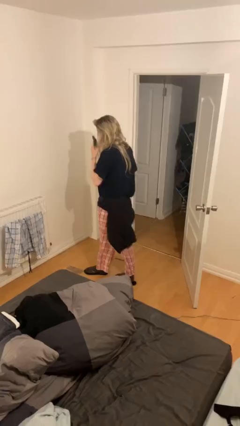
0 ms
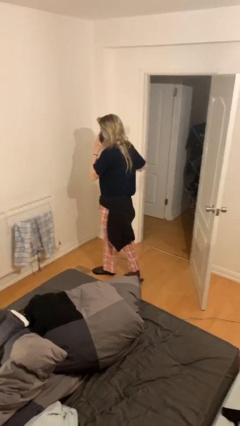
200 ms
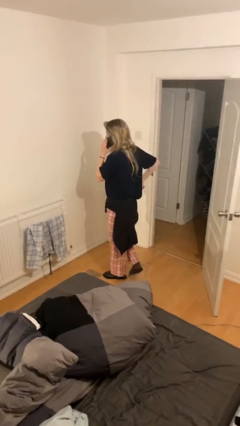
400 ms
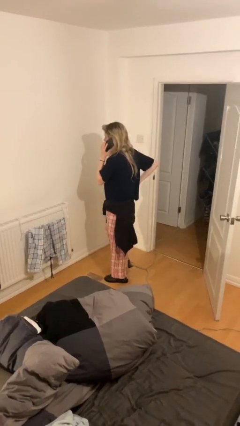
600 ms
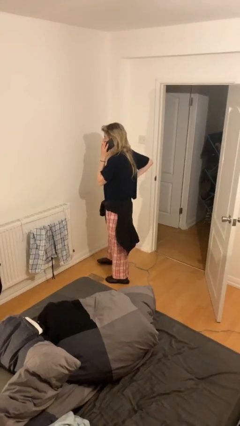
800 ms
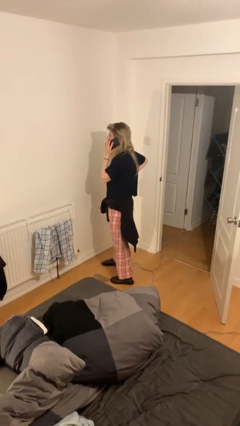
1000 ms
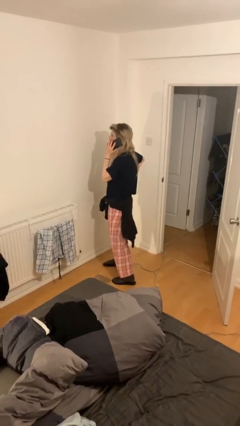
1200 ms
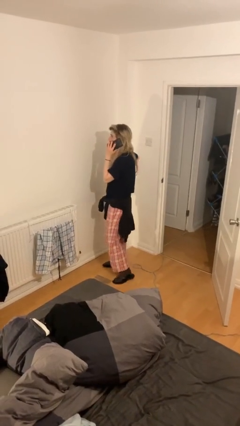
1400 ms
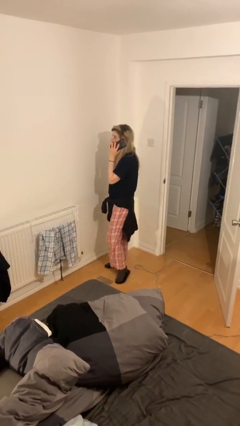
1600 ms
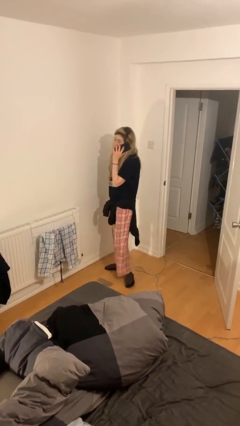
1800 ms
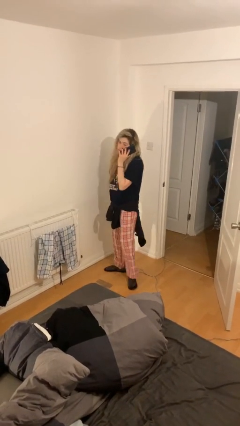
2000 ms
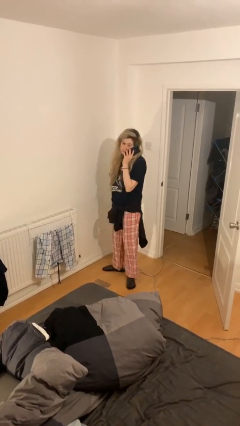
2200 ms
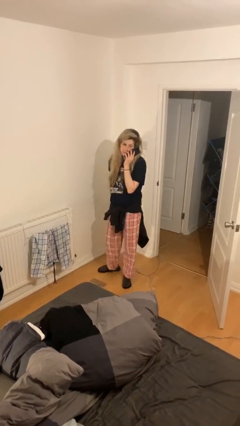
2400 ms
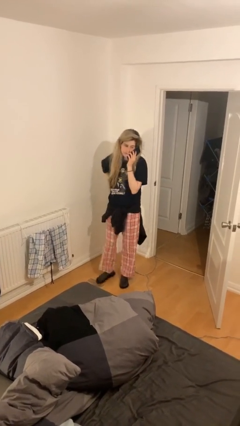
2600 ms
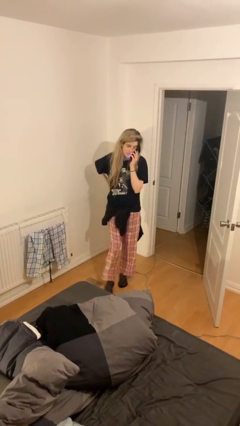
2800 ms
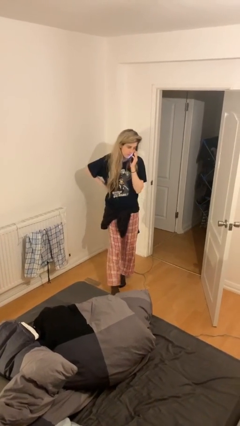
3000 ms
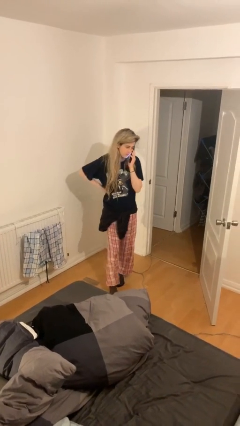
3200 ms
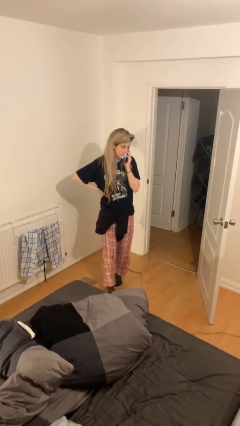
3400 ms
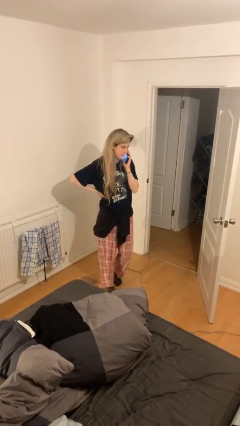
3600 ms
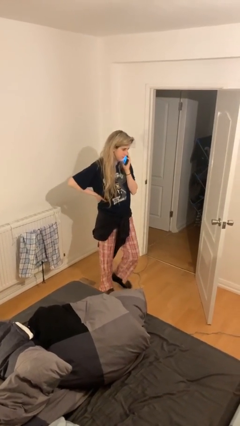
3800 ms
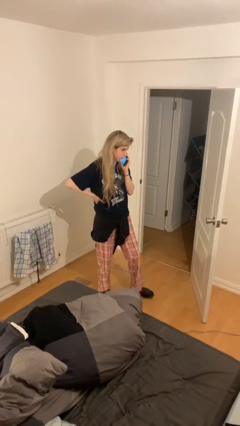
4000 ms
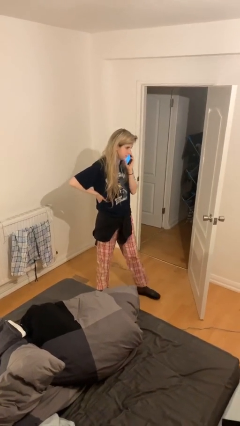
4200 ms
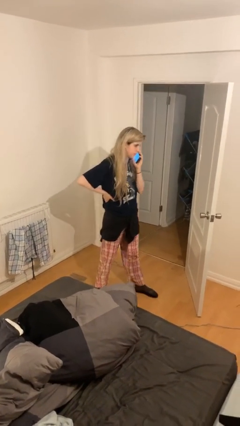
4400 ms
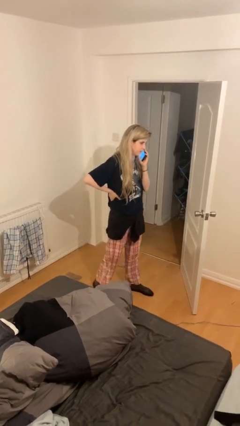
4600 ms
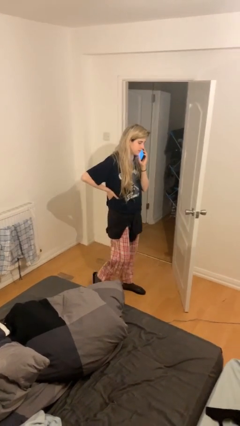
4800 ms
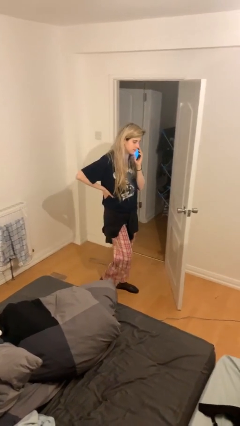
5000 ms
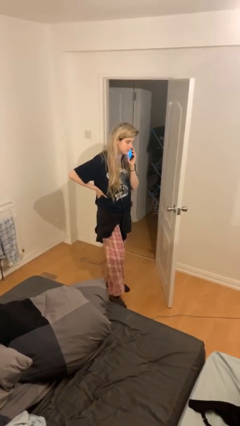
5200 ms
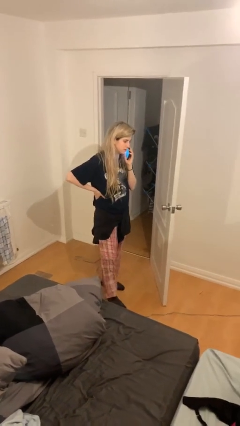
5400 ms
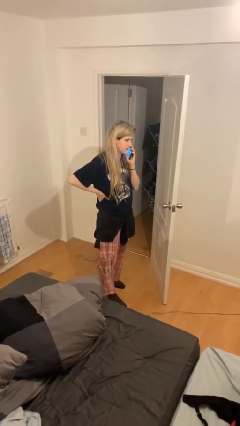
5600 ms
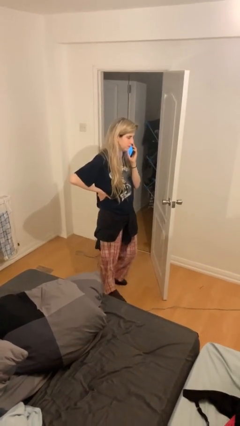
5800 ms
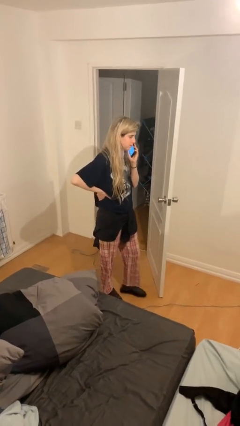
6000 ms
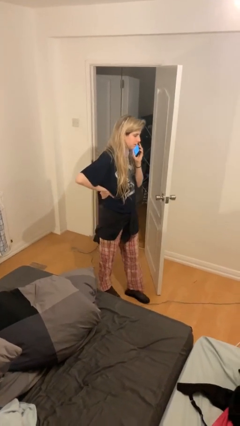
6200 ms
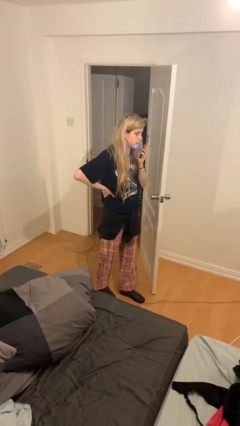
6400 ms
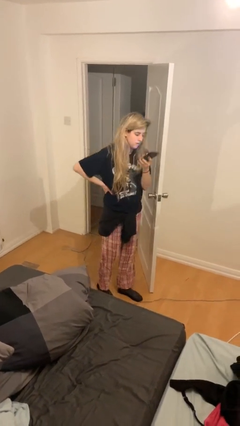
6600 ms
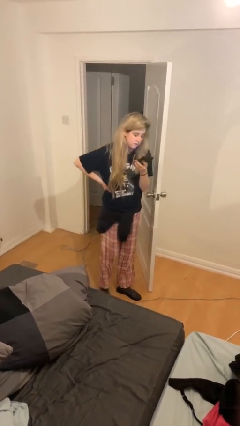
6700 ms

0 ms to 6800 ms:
person talks on phone

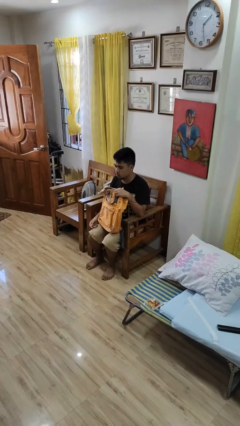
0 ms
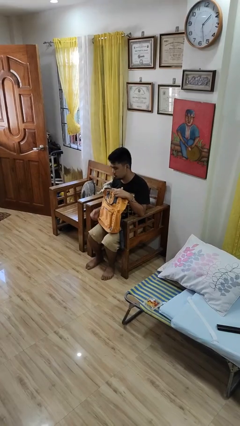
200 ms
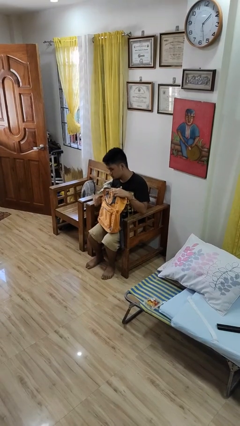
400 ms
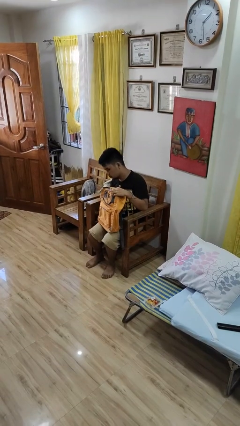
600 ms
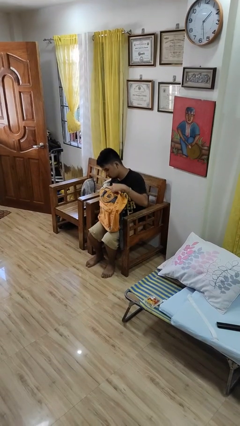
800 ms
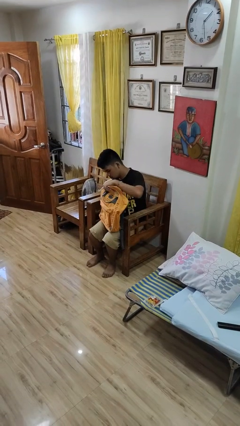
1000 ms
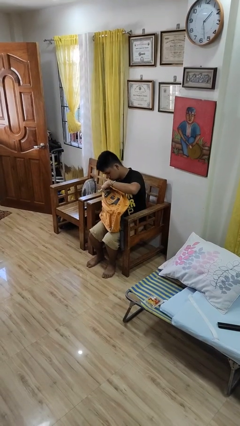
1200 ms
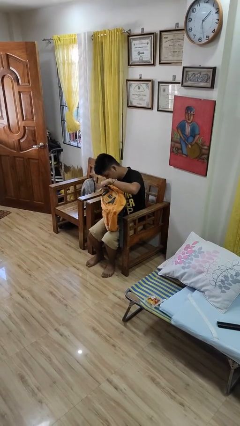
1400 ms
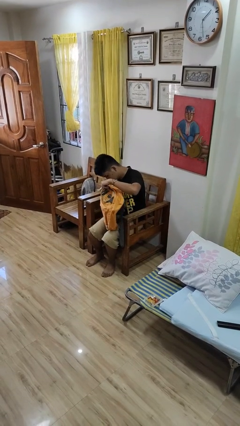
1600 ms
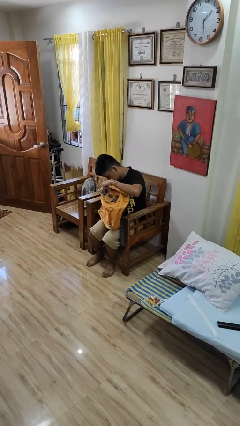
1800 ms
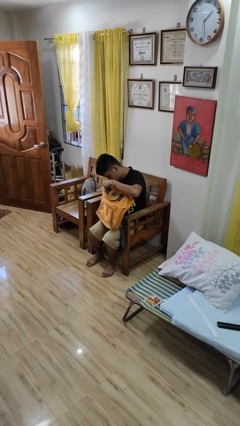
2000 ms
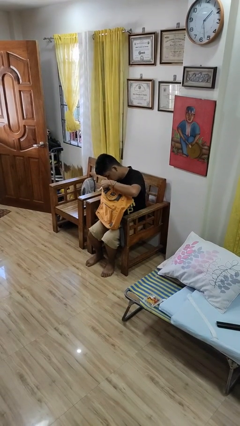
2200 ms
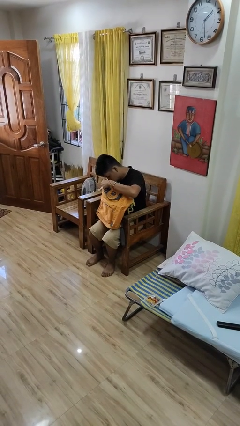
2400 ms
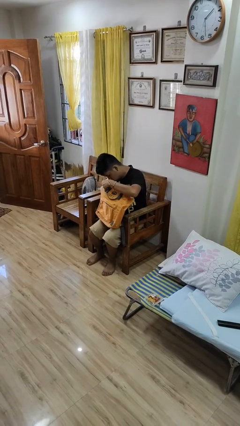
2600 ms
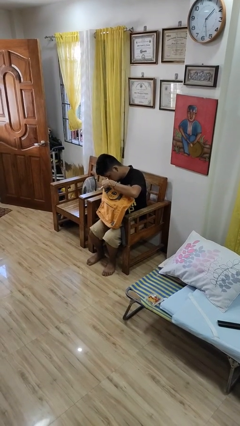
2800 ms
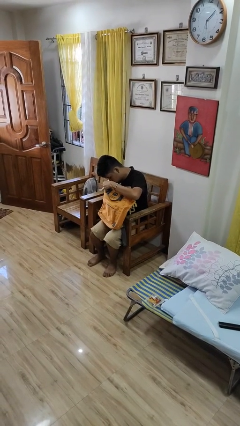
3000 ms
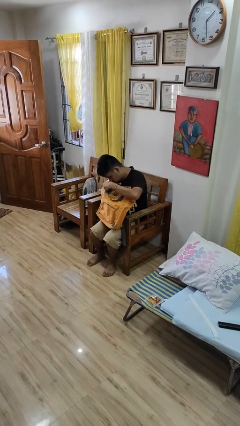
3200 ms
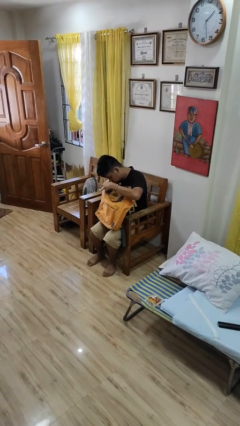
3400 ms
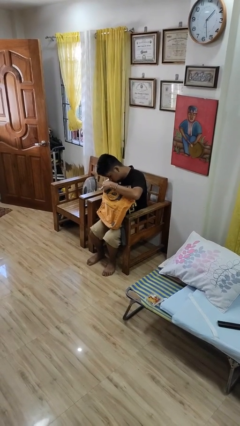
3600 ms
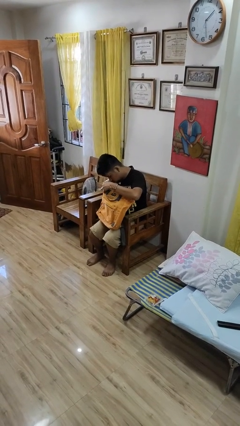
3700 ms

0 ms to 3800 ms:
person searches in backpack

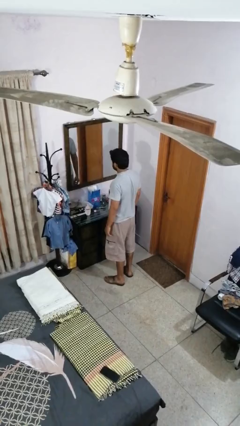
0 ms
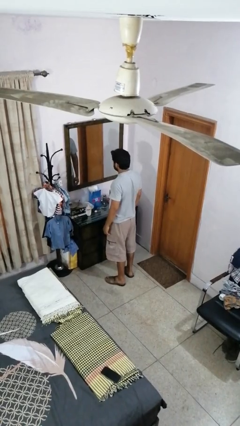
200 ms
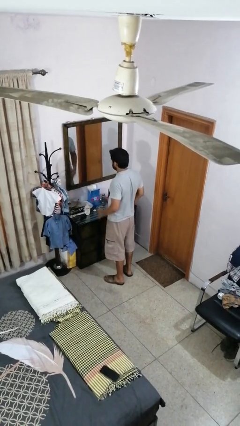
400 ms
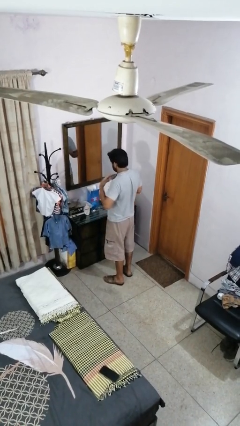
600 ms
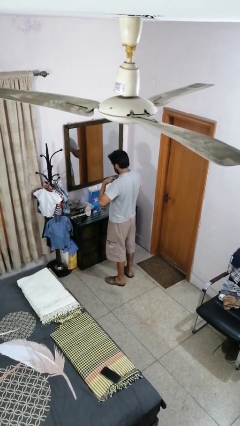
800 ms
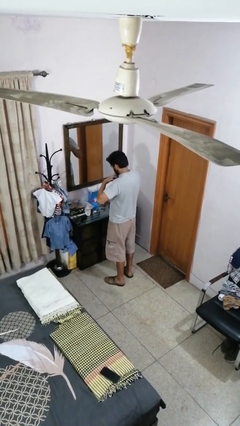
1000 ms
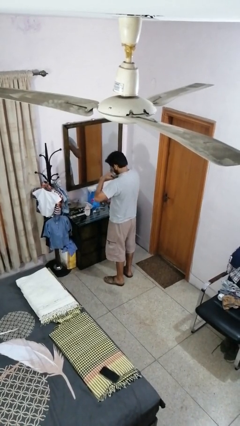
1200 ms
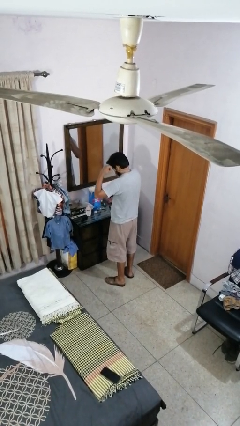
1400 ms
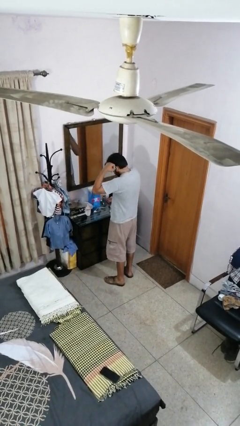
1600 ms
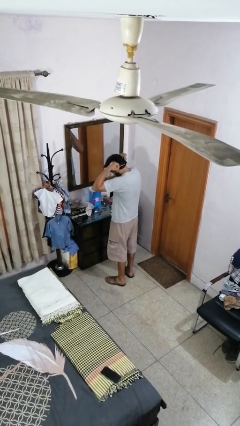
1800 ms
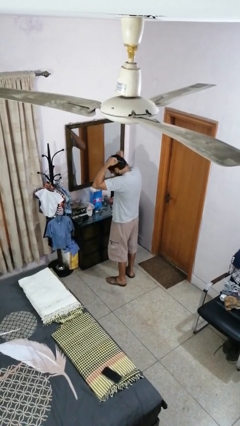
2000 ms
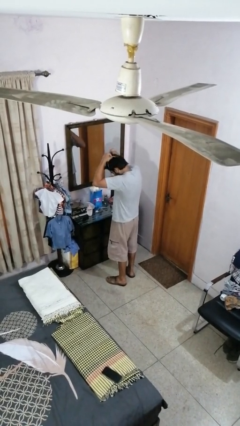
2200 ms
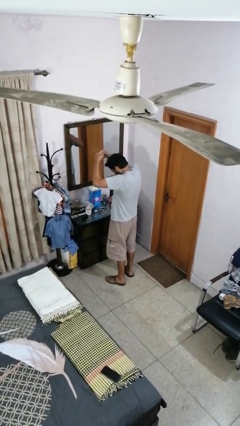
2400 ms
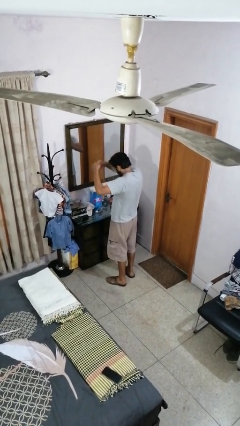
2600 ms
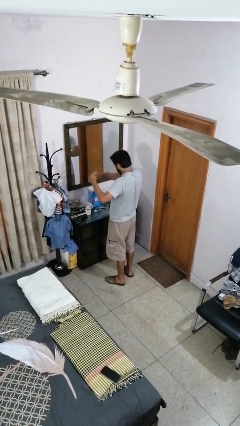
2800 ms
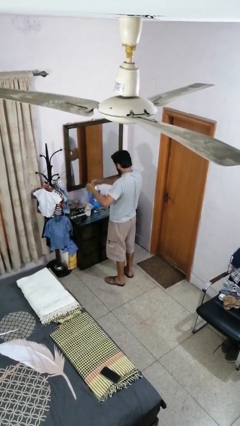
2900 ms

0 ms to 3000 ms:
person takes off necklace

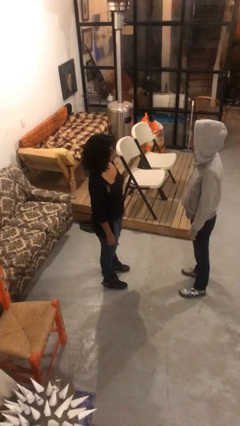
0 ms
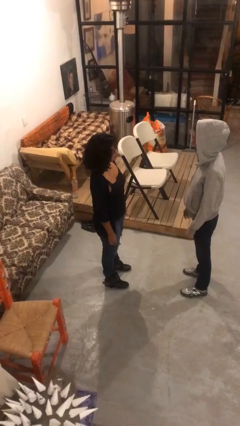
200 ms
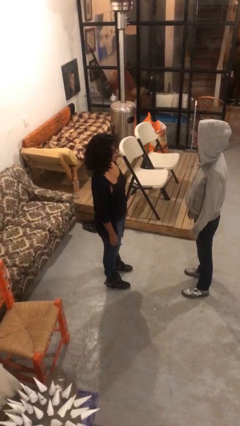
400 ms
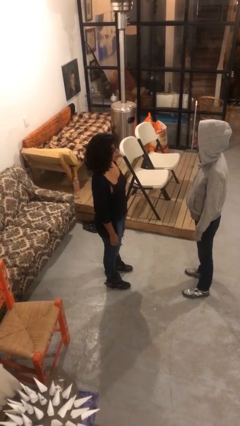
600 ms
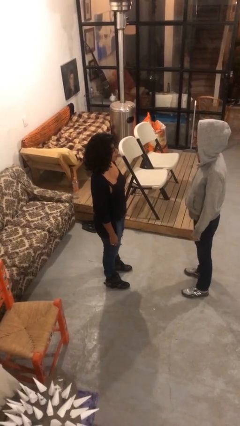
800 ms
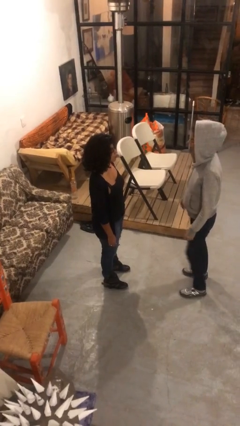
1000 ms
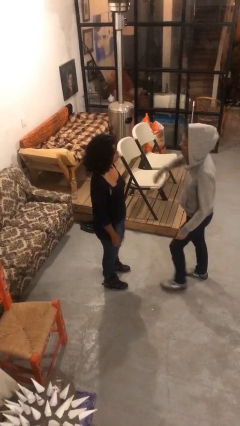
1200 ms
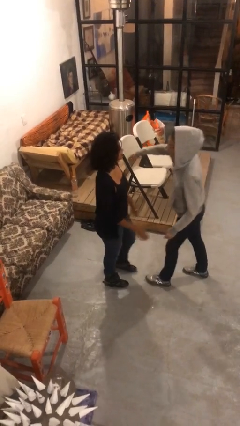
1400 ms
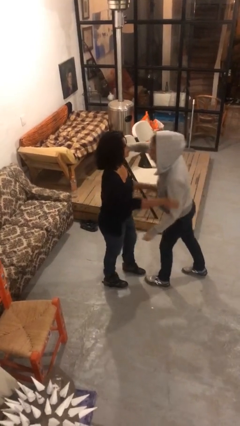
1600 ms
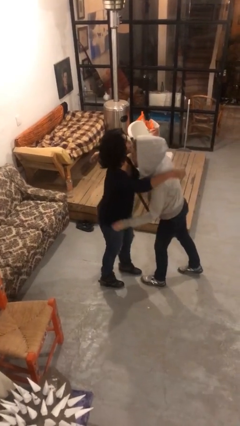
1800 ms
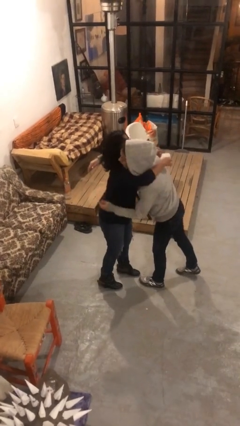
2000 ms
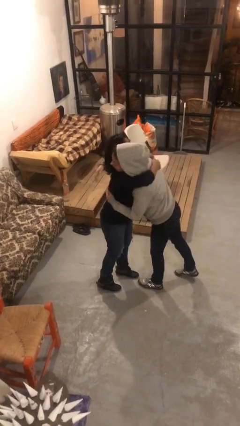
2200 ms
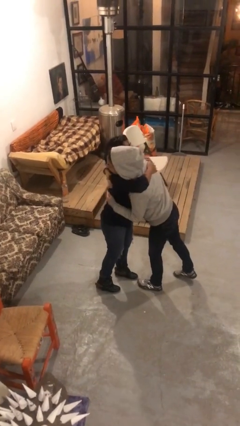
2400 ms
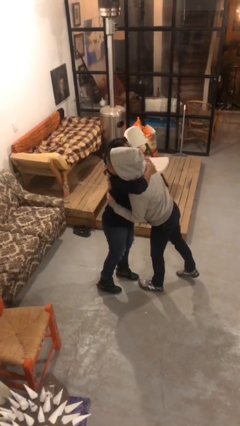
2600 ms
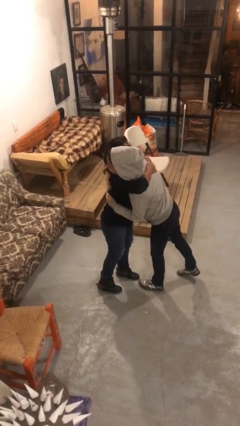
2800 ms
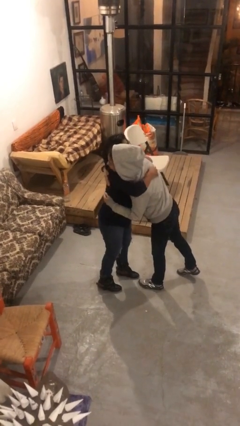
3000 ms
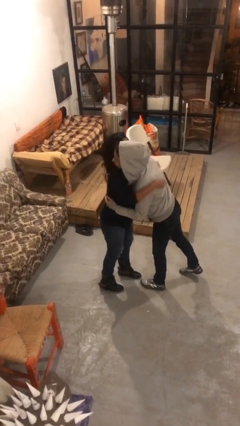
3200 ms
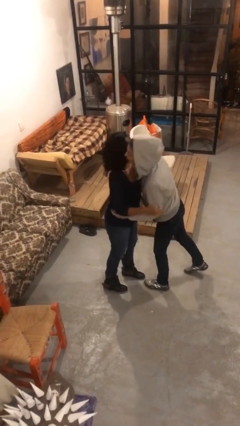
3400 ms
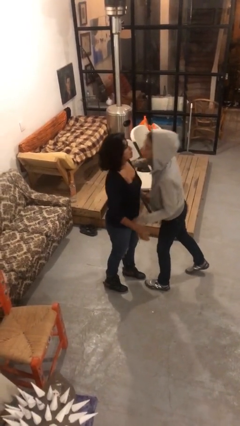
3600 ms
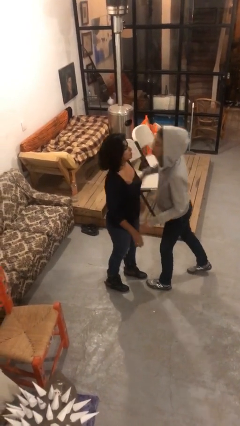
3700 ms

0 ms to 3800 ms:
person embraces person
